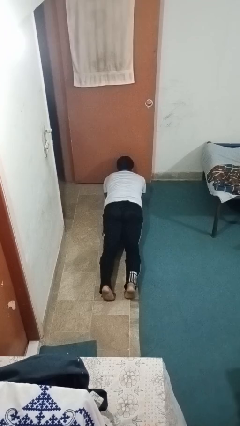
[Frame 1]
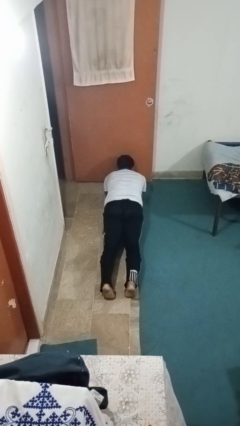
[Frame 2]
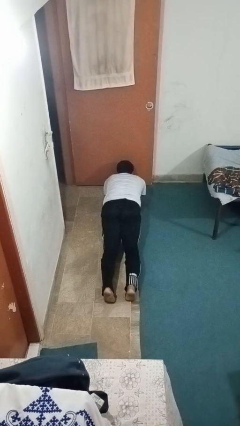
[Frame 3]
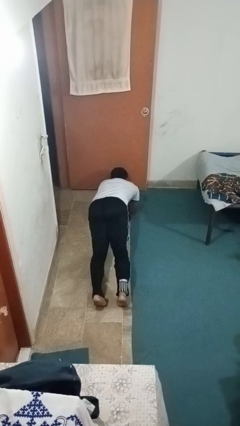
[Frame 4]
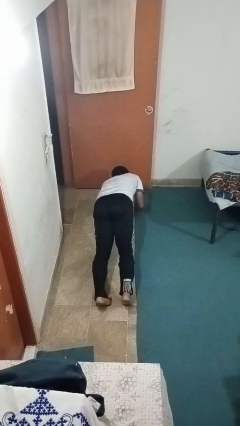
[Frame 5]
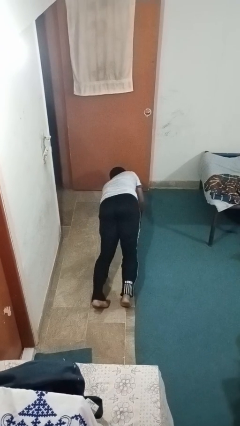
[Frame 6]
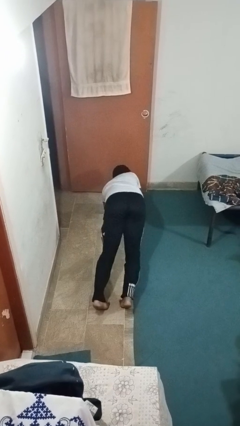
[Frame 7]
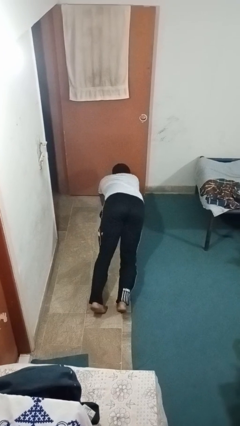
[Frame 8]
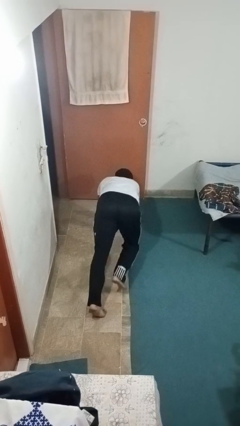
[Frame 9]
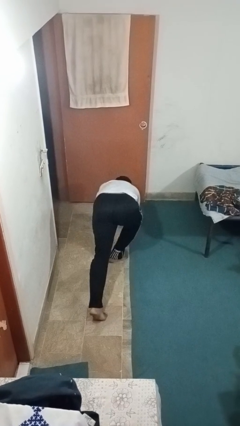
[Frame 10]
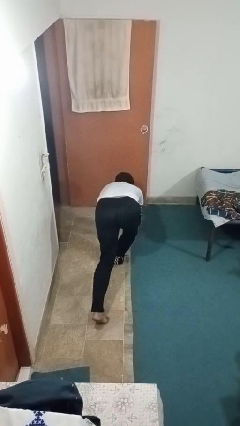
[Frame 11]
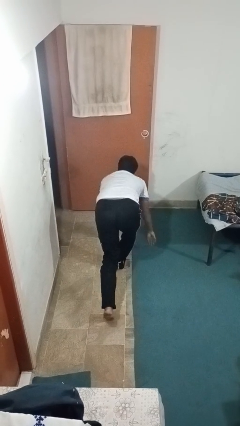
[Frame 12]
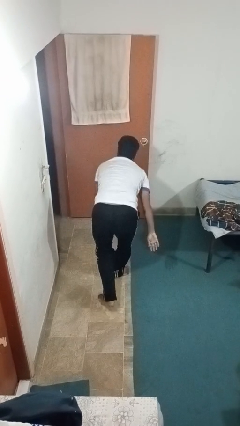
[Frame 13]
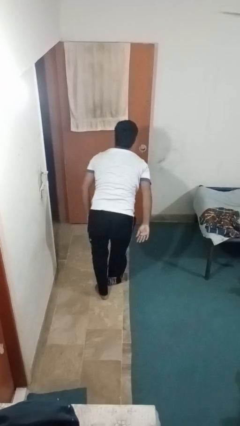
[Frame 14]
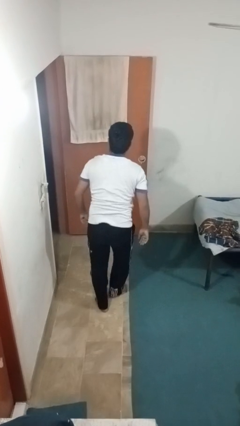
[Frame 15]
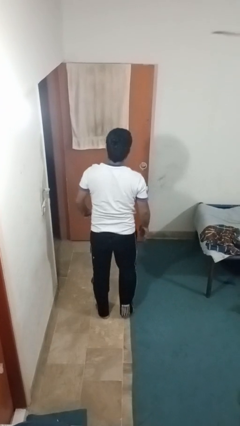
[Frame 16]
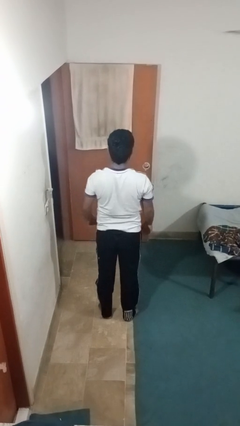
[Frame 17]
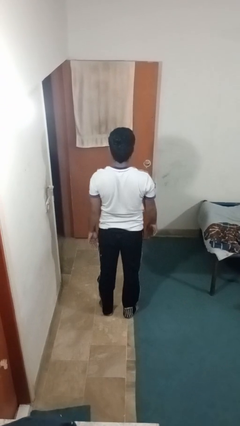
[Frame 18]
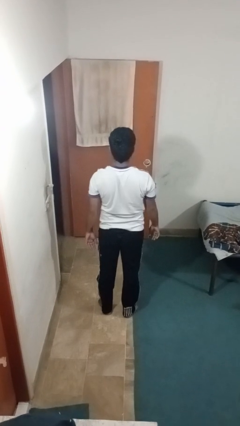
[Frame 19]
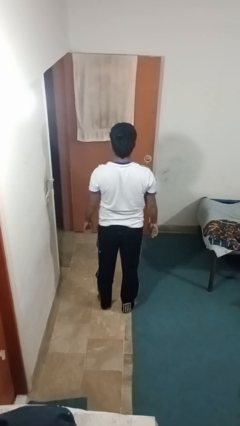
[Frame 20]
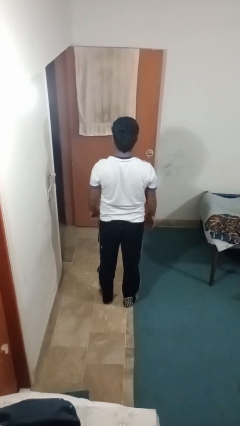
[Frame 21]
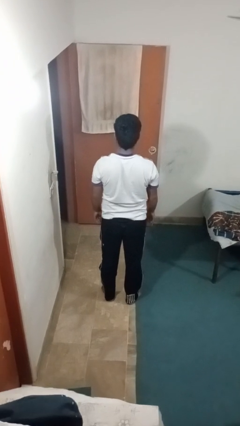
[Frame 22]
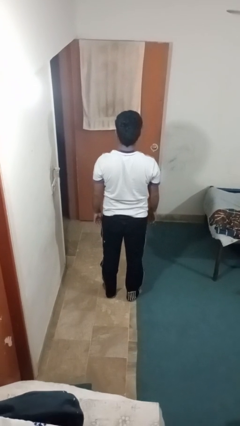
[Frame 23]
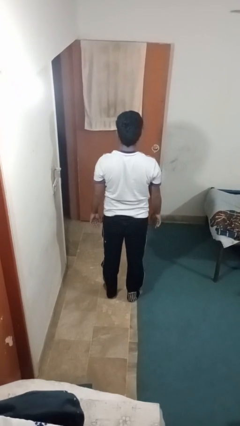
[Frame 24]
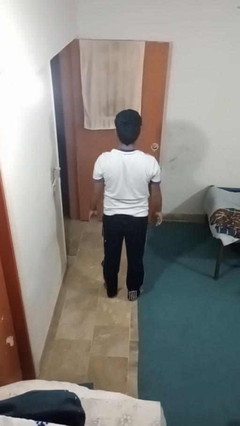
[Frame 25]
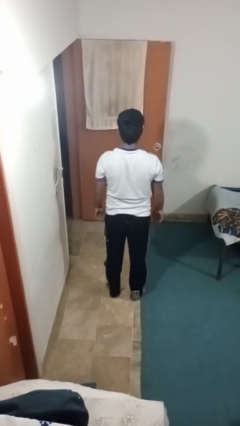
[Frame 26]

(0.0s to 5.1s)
person stands up from floor

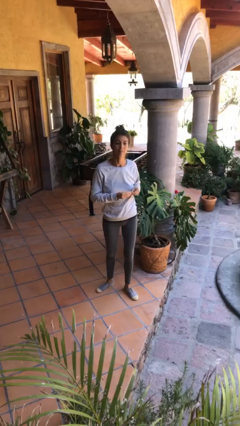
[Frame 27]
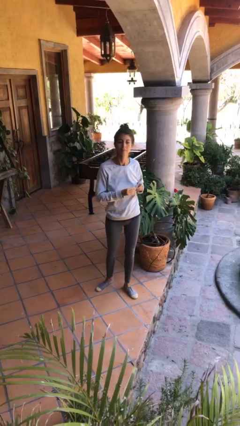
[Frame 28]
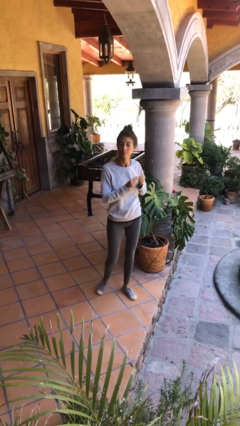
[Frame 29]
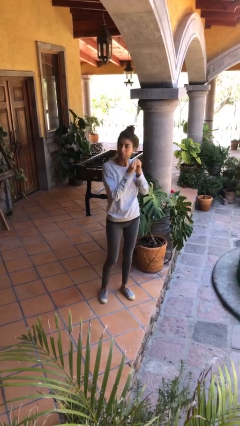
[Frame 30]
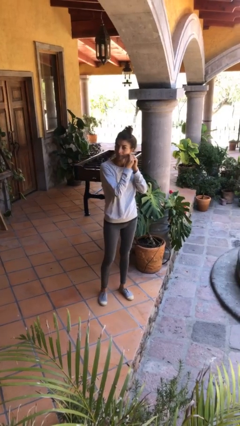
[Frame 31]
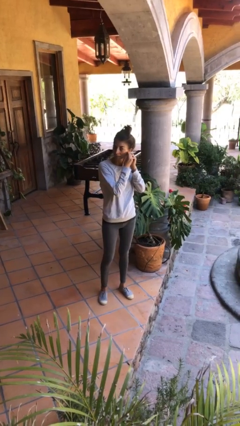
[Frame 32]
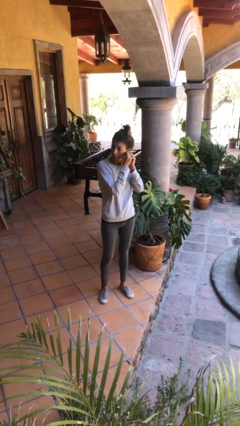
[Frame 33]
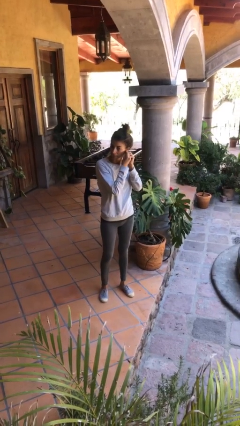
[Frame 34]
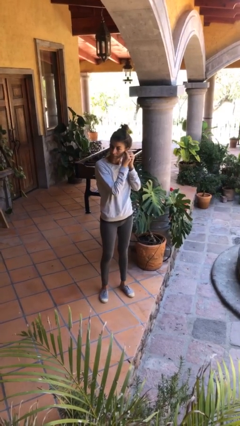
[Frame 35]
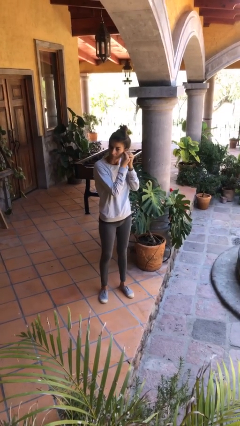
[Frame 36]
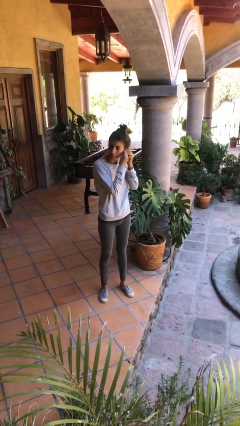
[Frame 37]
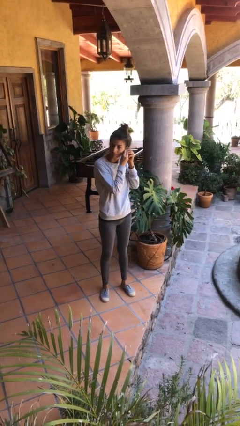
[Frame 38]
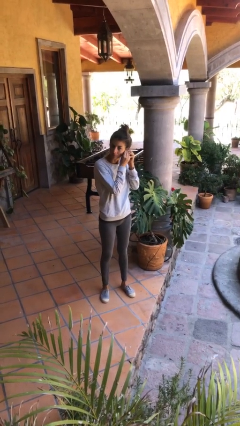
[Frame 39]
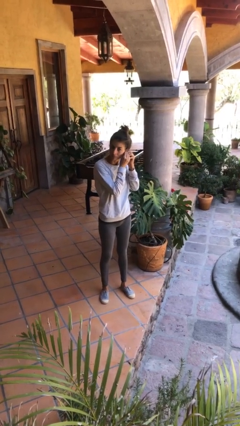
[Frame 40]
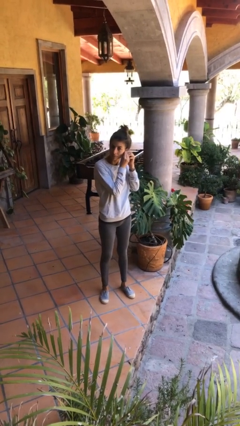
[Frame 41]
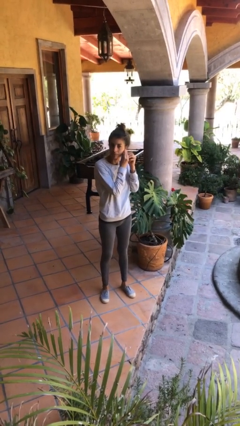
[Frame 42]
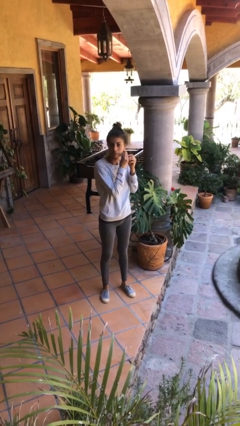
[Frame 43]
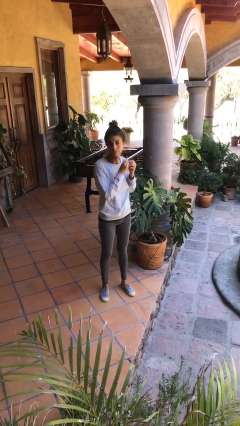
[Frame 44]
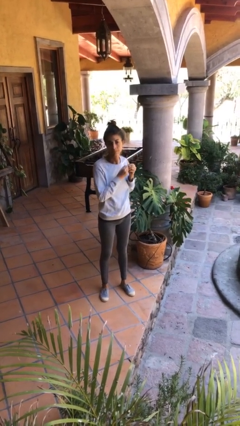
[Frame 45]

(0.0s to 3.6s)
person puts on earrings

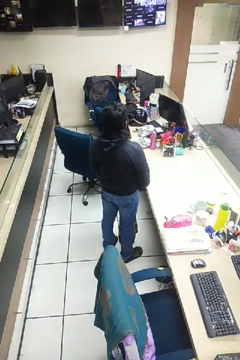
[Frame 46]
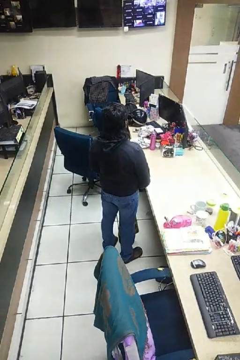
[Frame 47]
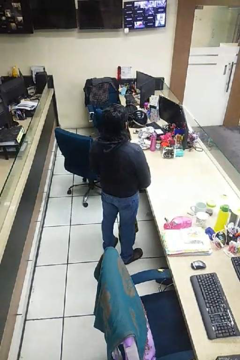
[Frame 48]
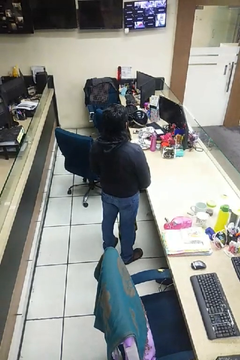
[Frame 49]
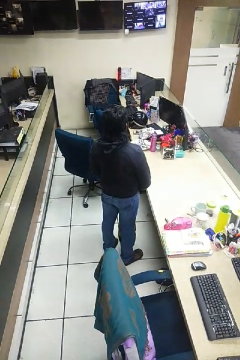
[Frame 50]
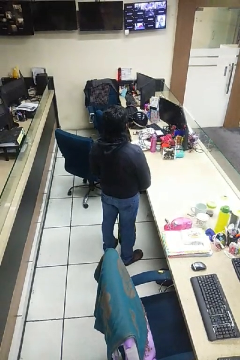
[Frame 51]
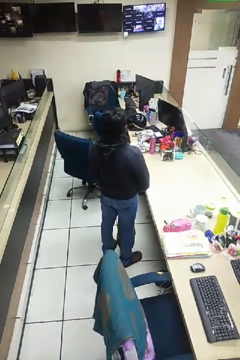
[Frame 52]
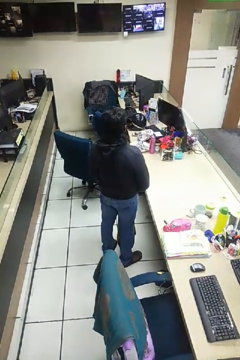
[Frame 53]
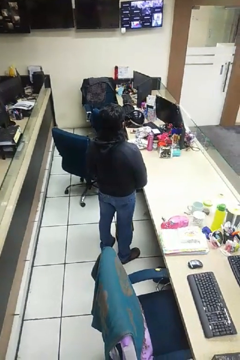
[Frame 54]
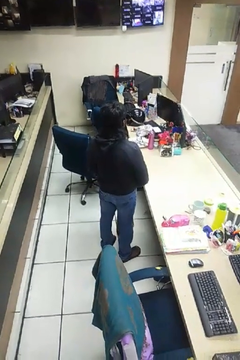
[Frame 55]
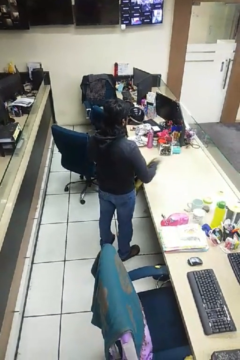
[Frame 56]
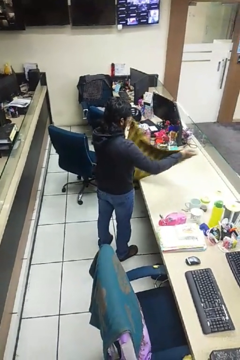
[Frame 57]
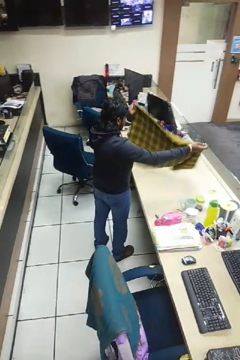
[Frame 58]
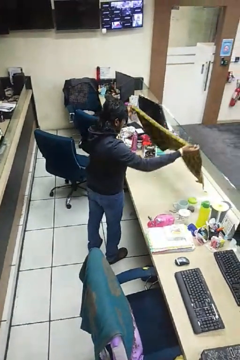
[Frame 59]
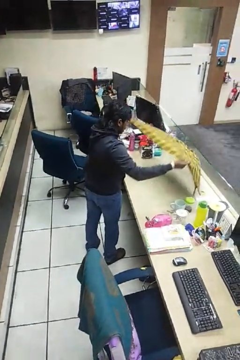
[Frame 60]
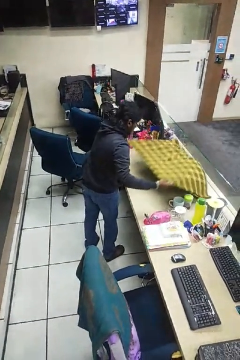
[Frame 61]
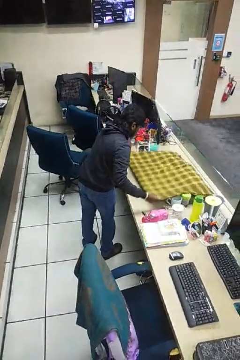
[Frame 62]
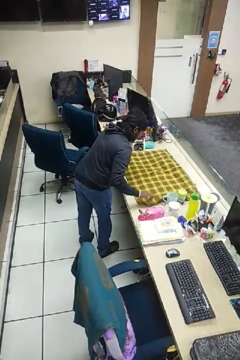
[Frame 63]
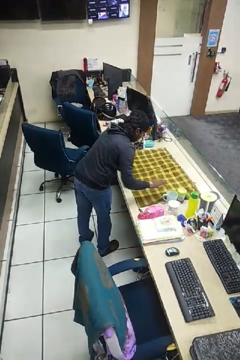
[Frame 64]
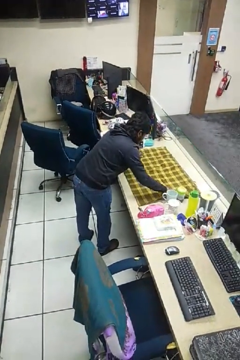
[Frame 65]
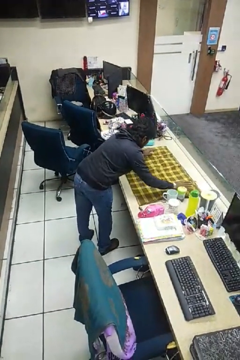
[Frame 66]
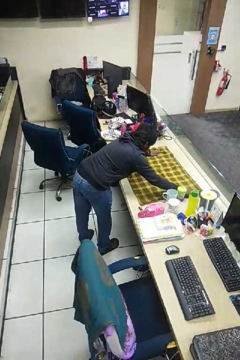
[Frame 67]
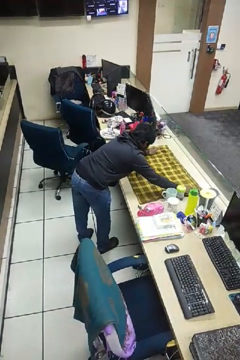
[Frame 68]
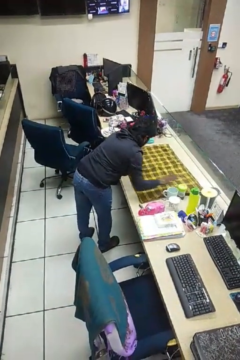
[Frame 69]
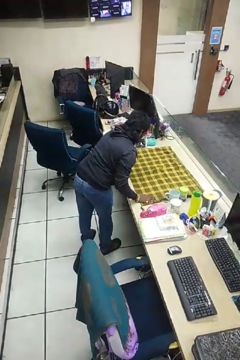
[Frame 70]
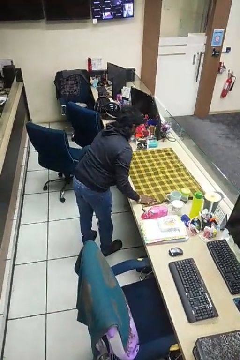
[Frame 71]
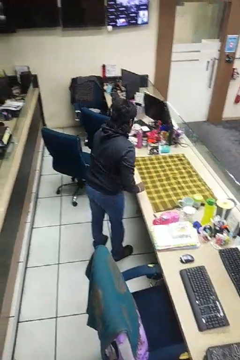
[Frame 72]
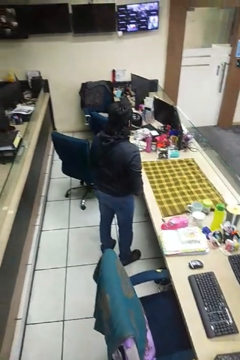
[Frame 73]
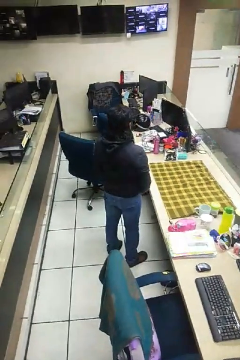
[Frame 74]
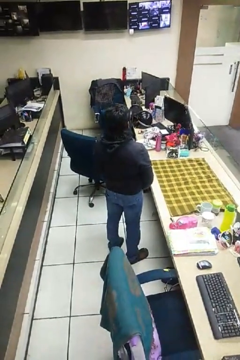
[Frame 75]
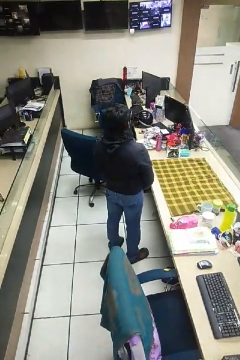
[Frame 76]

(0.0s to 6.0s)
person spreads tablecloth

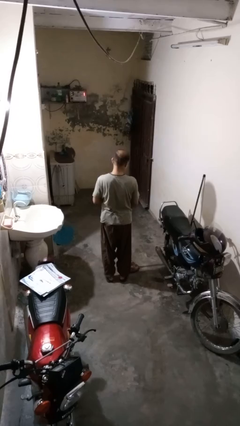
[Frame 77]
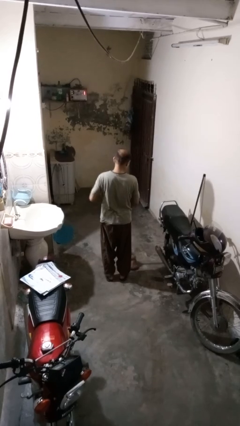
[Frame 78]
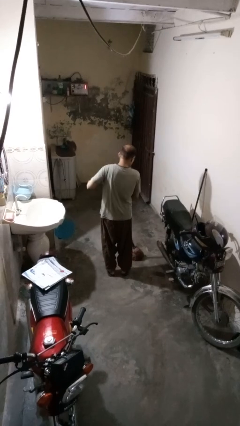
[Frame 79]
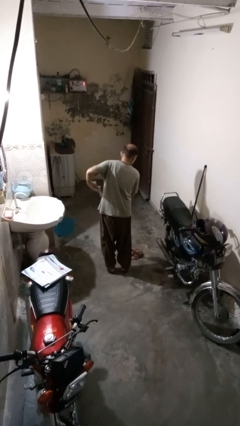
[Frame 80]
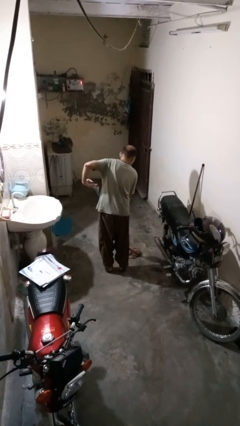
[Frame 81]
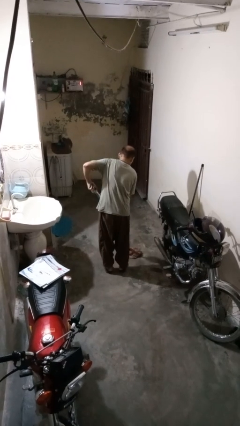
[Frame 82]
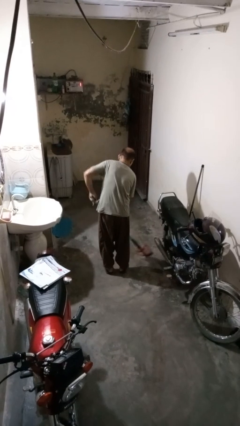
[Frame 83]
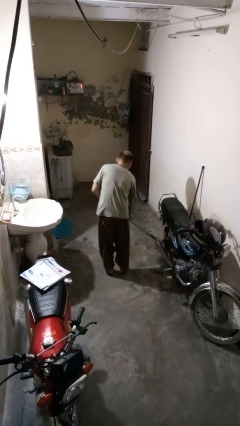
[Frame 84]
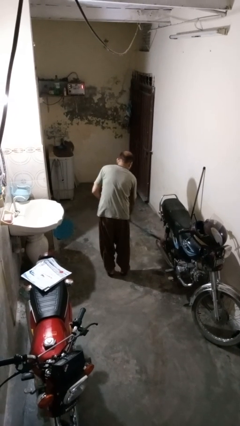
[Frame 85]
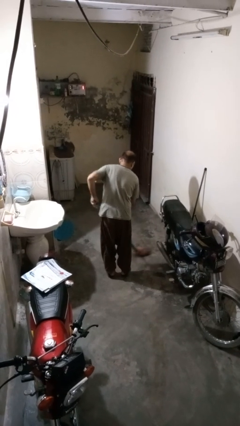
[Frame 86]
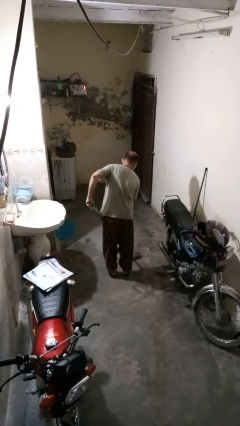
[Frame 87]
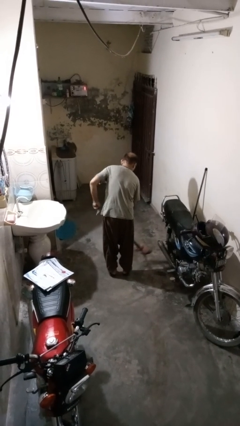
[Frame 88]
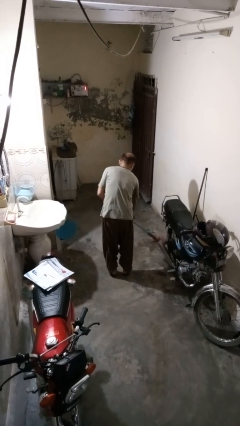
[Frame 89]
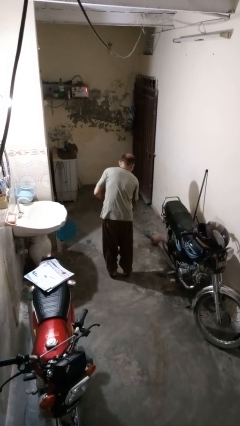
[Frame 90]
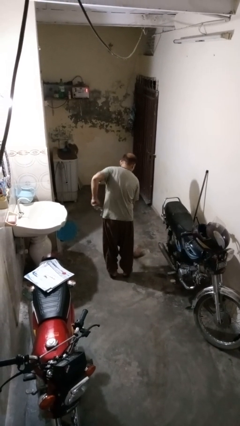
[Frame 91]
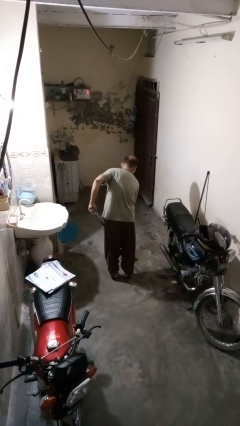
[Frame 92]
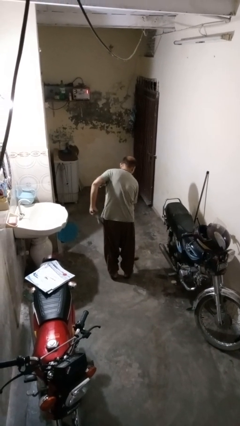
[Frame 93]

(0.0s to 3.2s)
person mops

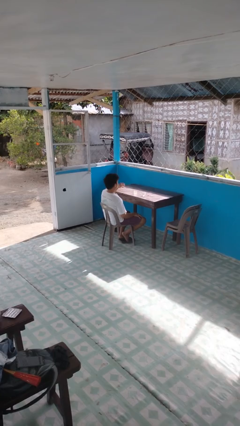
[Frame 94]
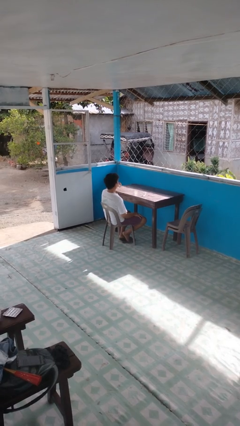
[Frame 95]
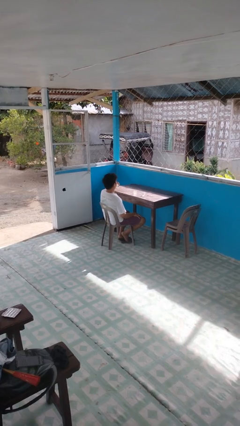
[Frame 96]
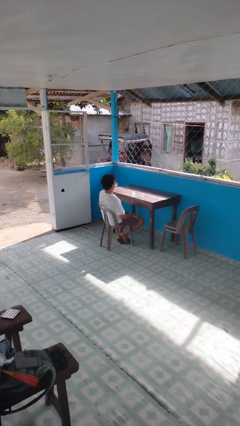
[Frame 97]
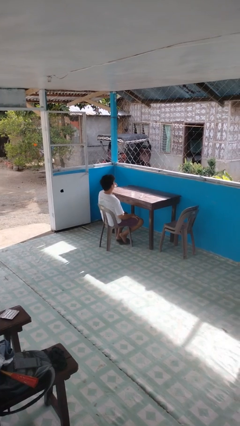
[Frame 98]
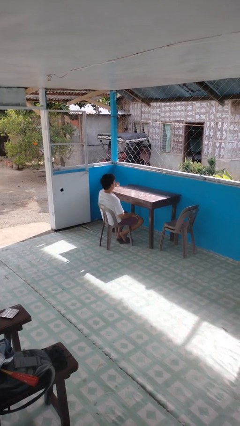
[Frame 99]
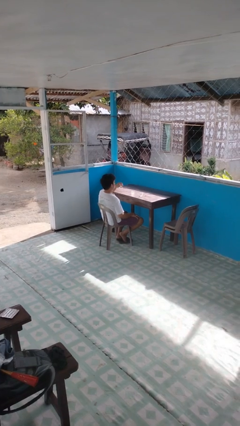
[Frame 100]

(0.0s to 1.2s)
person drinks from shotglass
